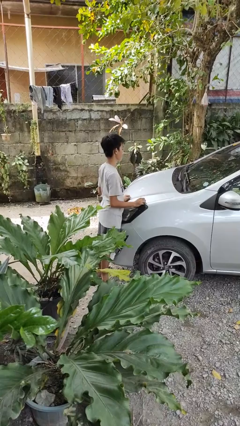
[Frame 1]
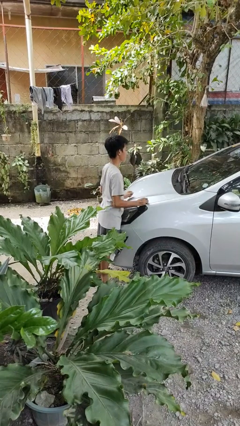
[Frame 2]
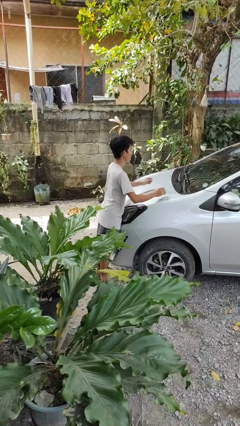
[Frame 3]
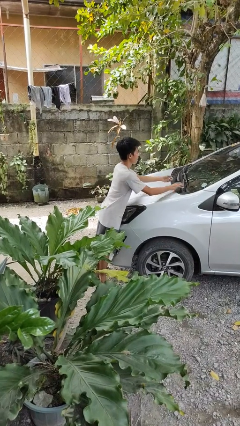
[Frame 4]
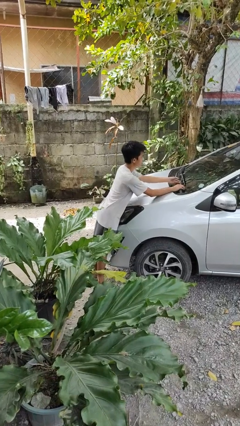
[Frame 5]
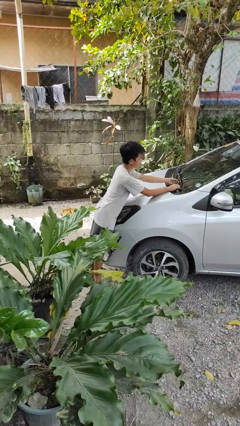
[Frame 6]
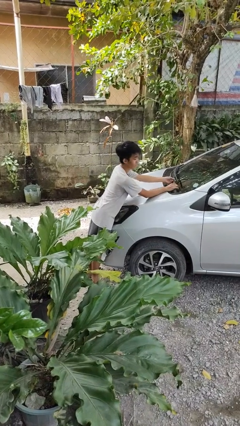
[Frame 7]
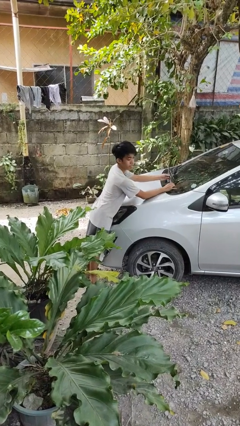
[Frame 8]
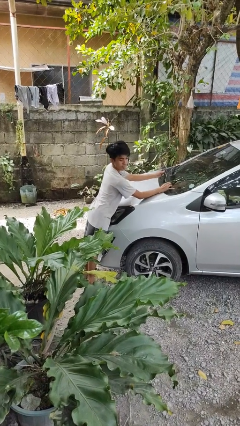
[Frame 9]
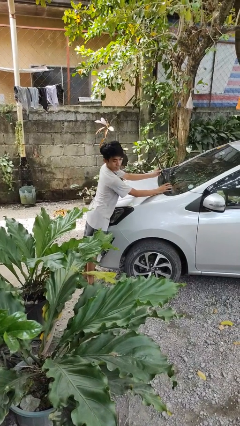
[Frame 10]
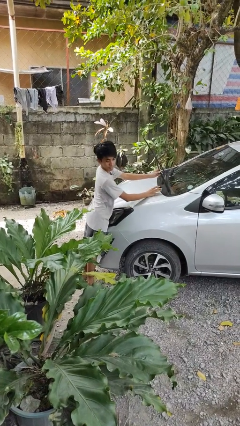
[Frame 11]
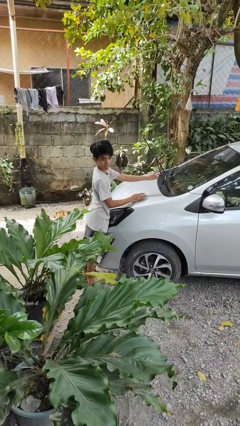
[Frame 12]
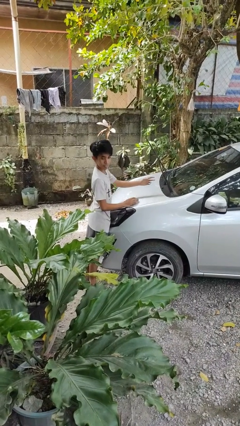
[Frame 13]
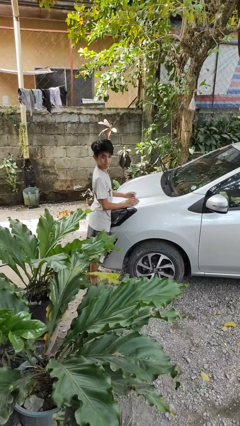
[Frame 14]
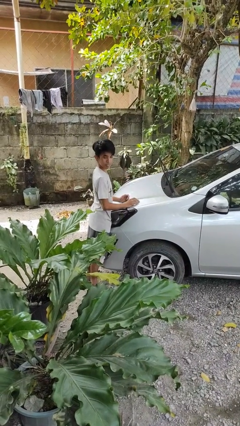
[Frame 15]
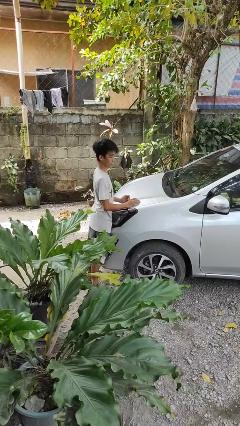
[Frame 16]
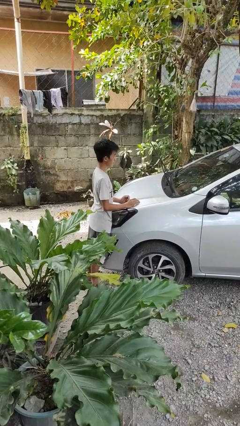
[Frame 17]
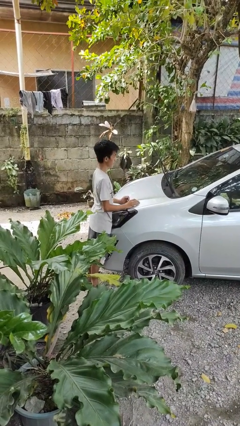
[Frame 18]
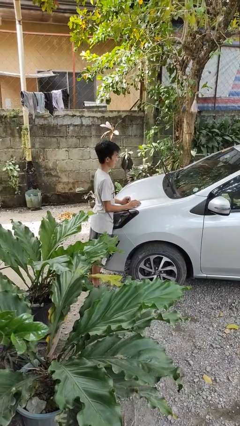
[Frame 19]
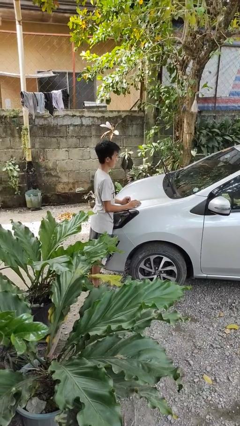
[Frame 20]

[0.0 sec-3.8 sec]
person flips up car wipers

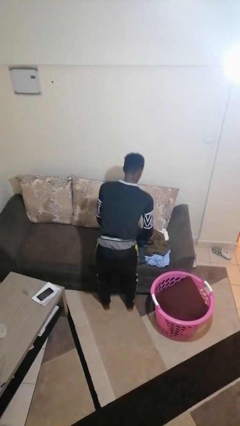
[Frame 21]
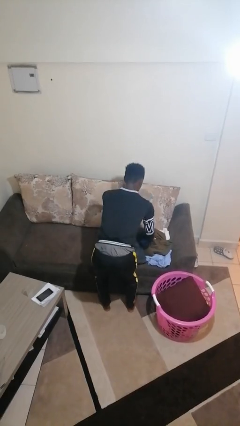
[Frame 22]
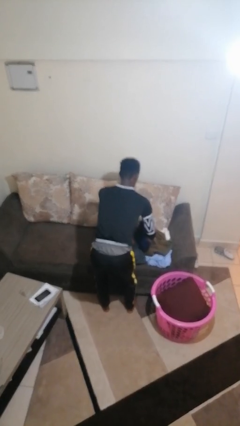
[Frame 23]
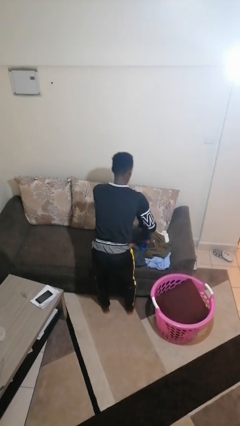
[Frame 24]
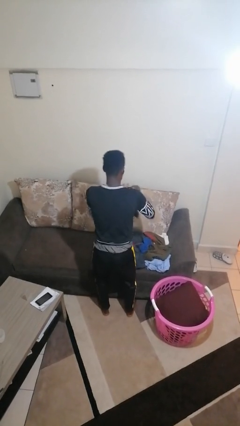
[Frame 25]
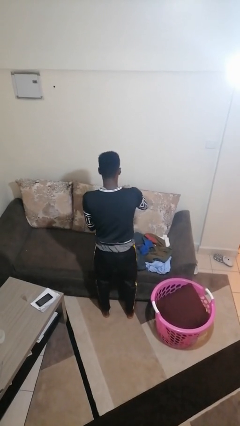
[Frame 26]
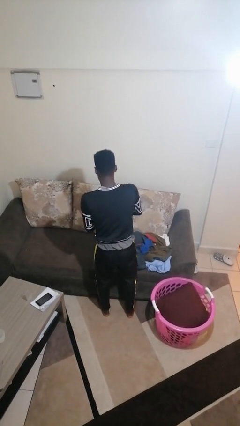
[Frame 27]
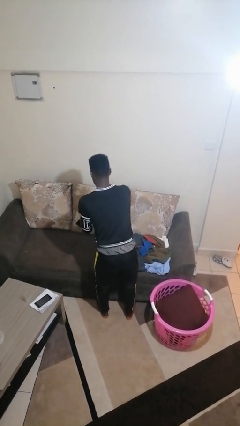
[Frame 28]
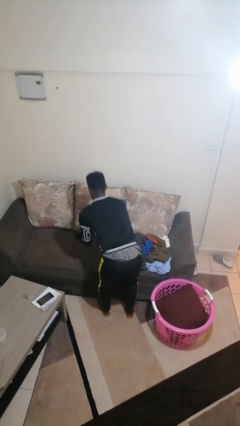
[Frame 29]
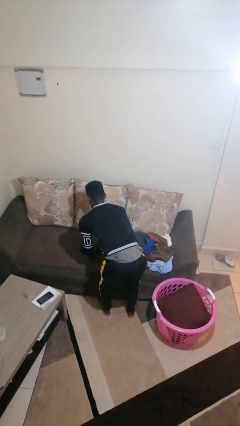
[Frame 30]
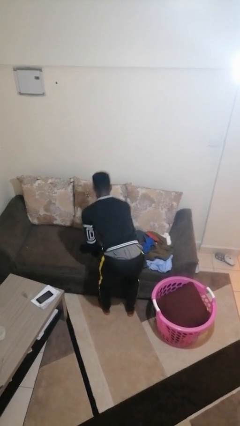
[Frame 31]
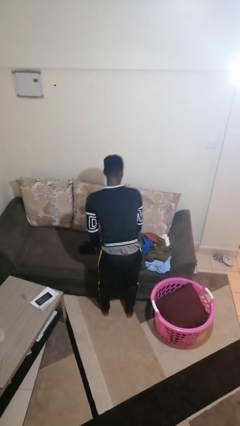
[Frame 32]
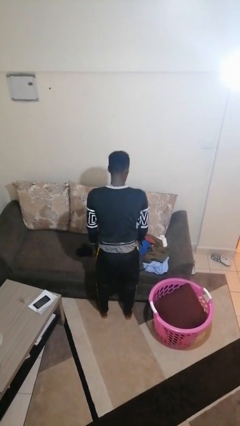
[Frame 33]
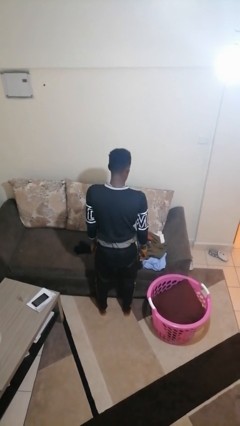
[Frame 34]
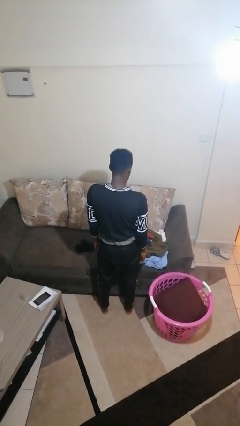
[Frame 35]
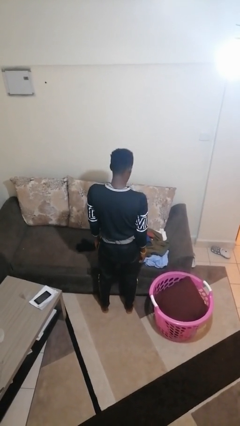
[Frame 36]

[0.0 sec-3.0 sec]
person folds socks

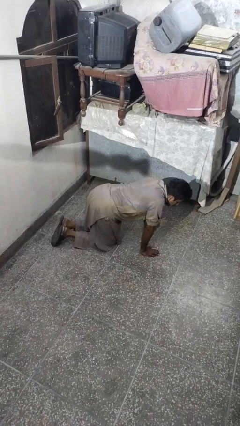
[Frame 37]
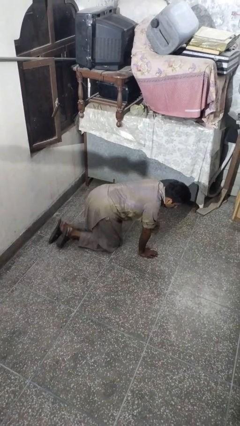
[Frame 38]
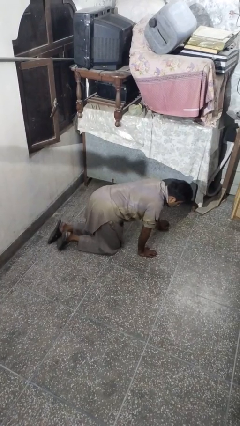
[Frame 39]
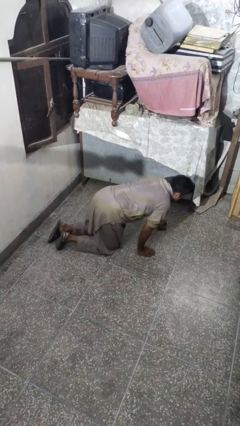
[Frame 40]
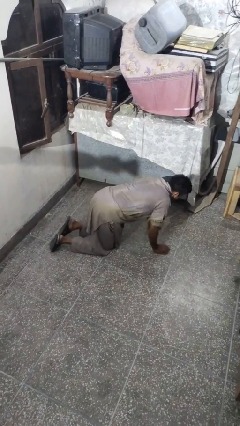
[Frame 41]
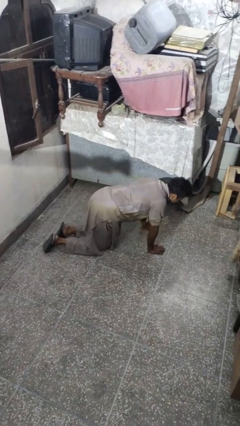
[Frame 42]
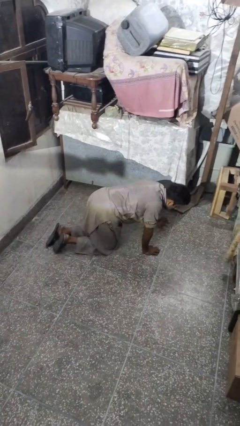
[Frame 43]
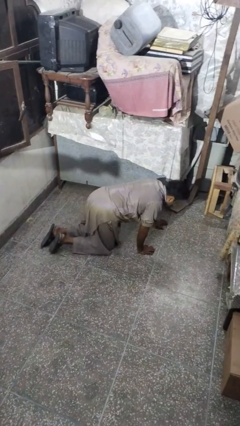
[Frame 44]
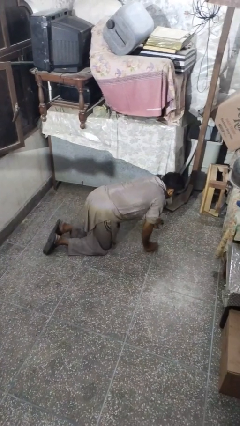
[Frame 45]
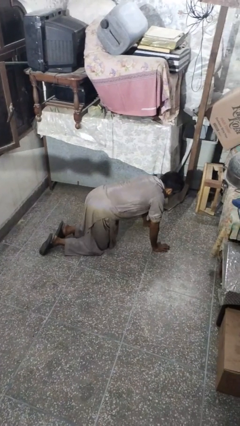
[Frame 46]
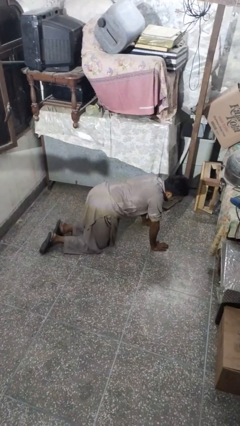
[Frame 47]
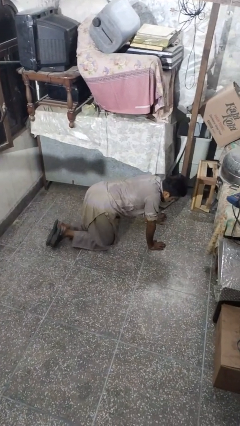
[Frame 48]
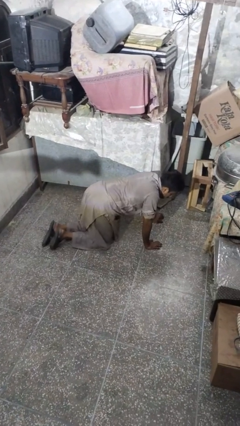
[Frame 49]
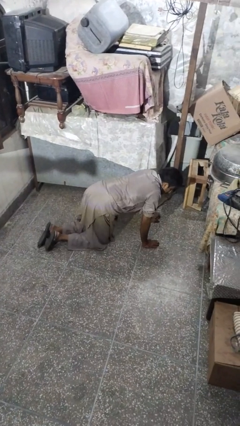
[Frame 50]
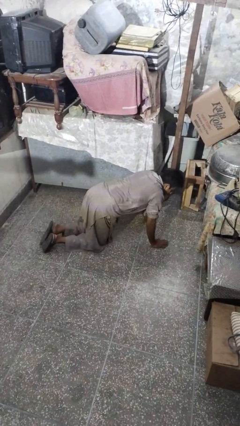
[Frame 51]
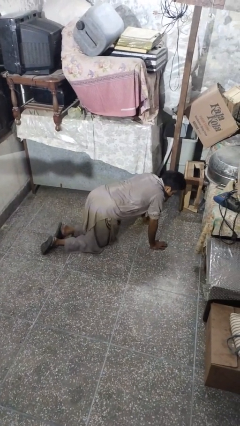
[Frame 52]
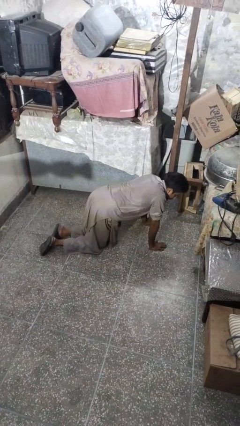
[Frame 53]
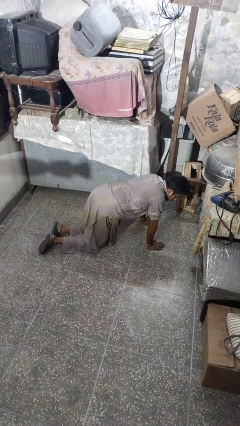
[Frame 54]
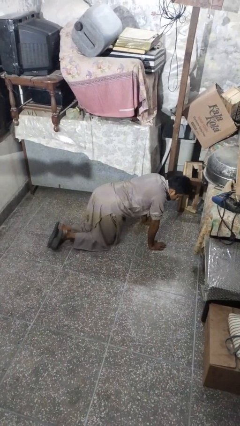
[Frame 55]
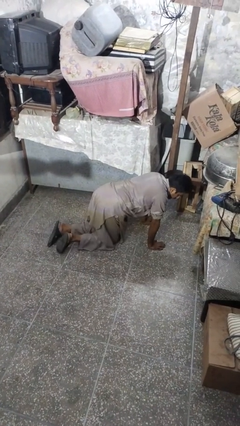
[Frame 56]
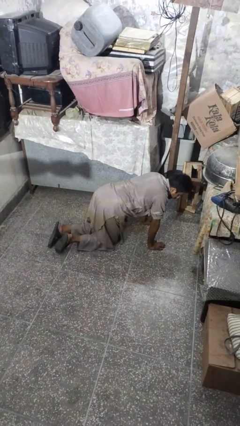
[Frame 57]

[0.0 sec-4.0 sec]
person crawls

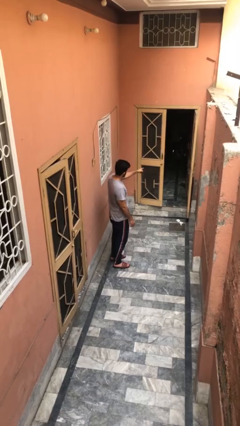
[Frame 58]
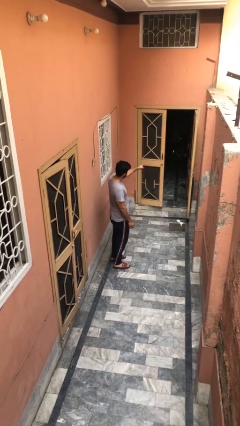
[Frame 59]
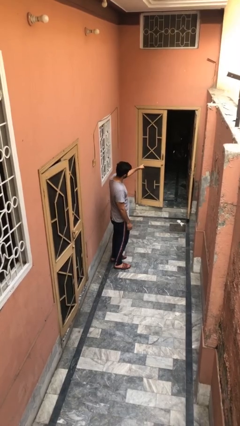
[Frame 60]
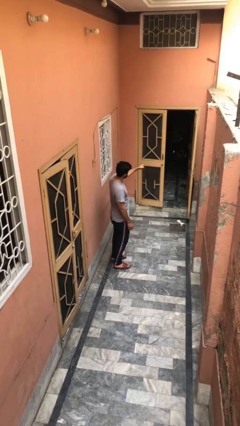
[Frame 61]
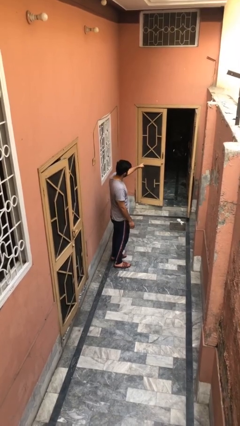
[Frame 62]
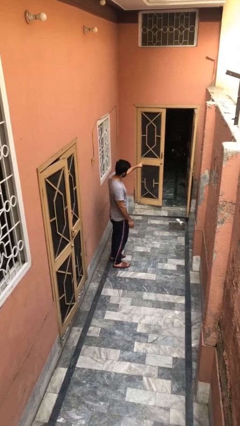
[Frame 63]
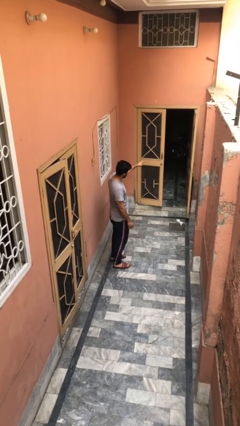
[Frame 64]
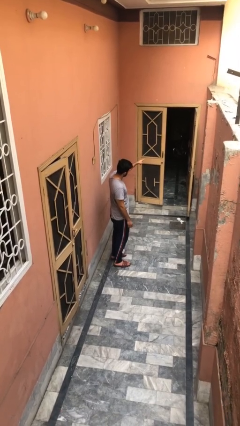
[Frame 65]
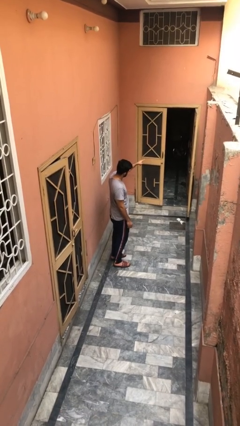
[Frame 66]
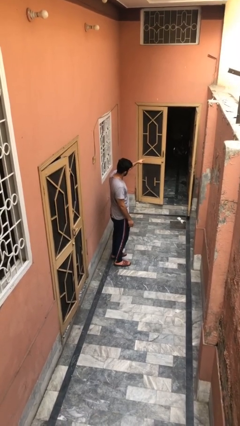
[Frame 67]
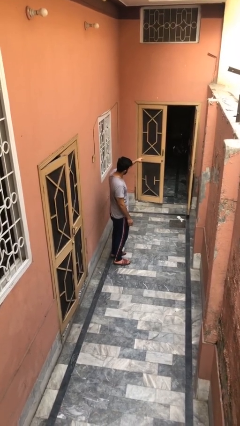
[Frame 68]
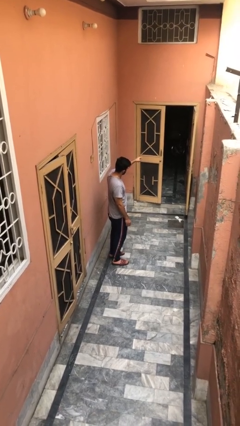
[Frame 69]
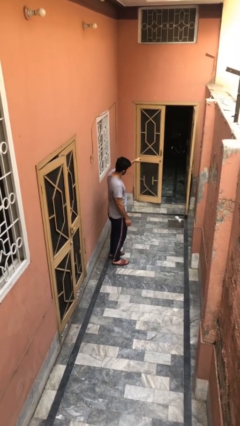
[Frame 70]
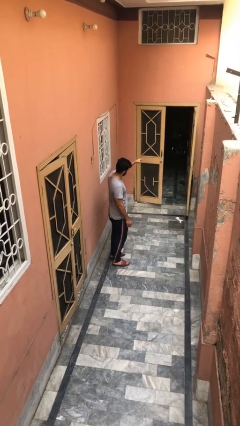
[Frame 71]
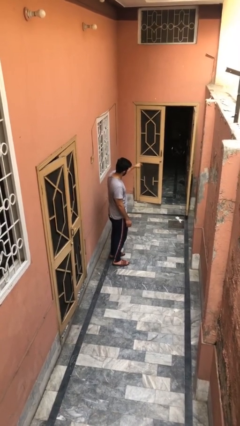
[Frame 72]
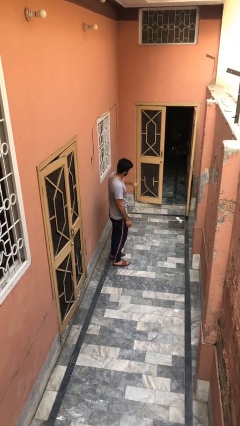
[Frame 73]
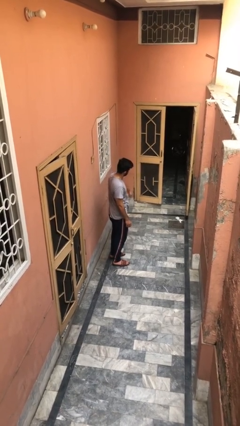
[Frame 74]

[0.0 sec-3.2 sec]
person points at person

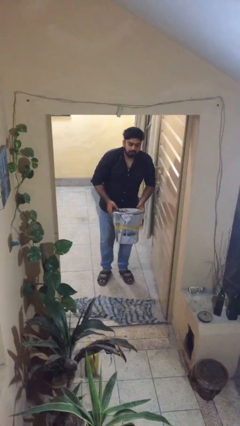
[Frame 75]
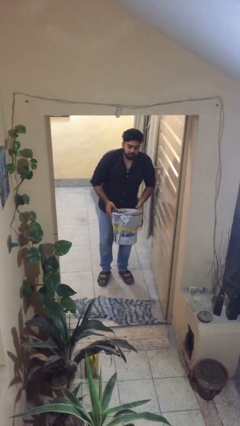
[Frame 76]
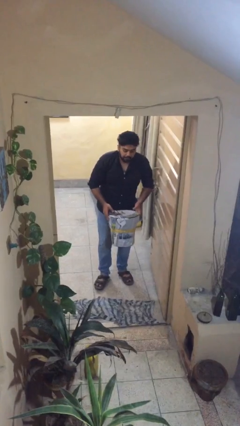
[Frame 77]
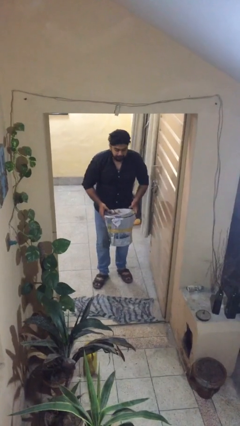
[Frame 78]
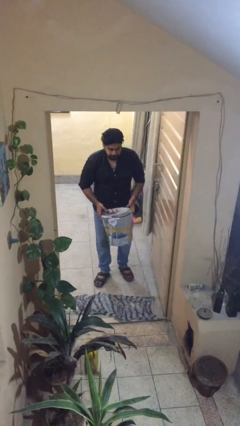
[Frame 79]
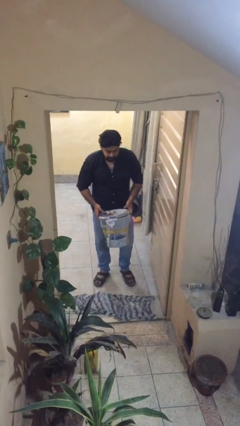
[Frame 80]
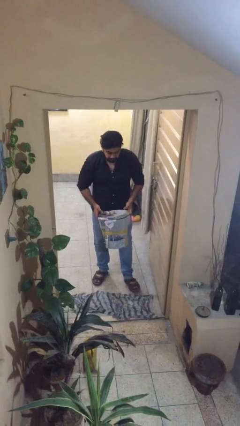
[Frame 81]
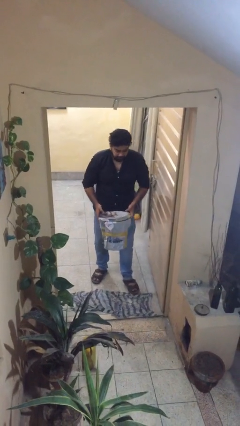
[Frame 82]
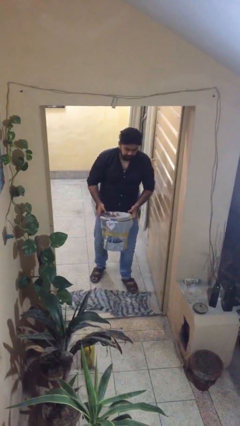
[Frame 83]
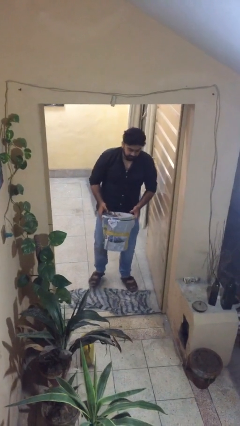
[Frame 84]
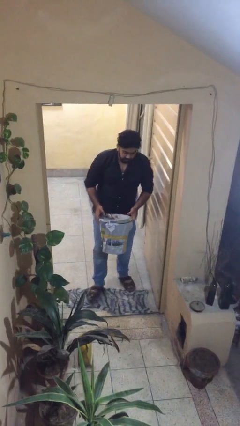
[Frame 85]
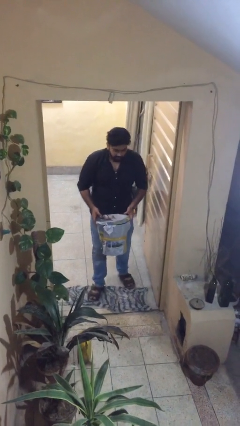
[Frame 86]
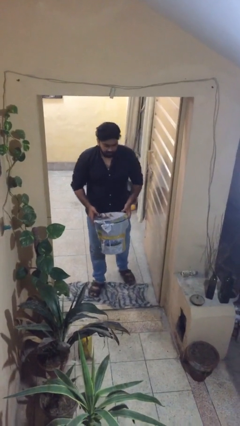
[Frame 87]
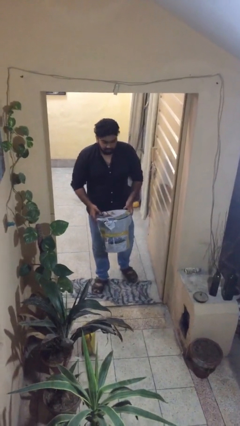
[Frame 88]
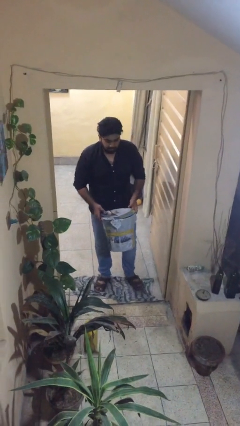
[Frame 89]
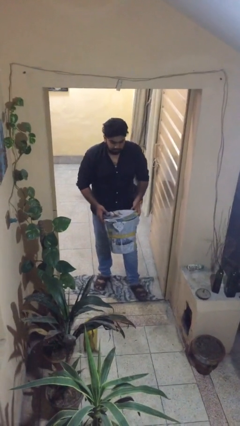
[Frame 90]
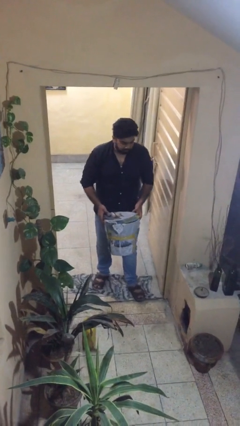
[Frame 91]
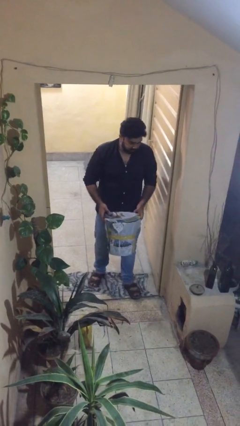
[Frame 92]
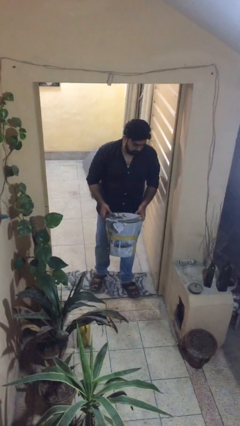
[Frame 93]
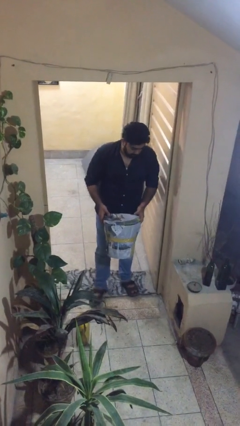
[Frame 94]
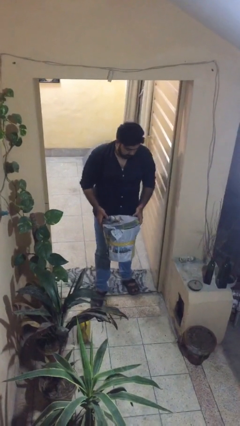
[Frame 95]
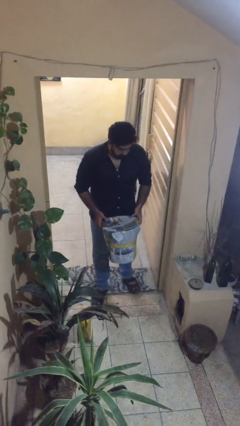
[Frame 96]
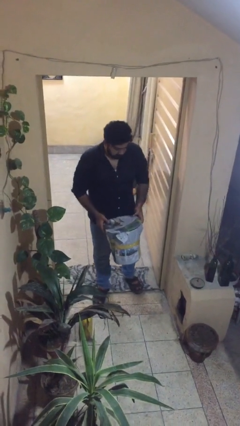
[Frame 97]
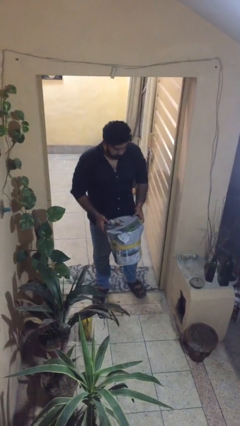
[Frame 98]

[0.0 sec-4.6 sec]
person carries heavy object
